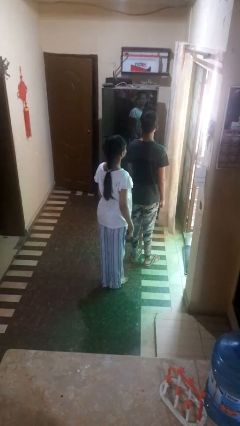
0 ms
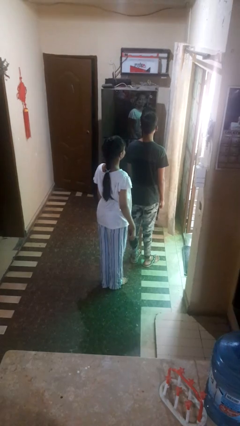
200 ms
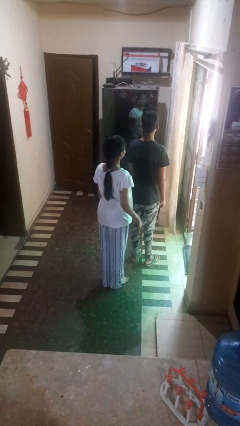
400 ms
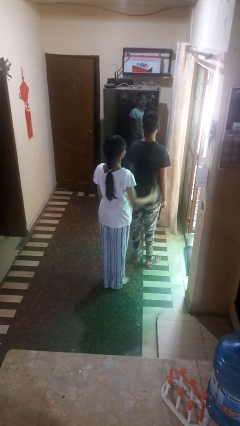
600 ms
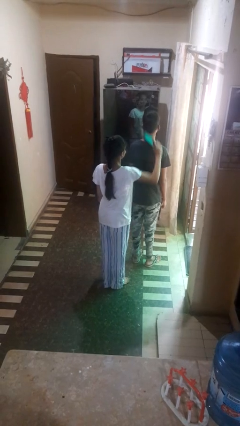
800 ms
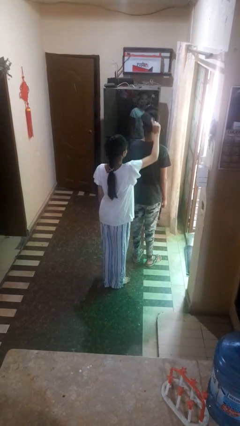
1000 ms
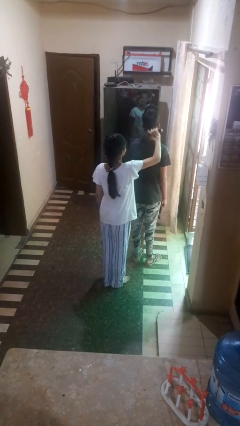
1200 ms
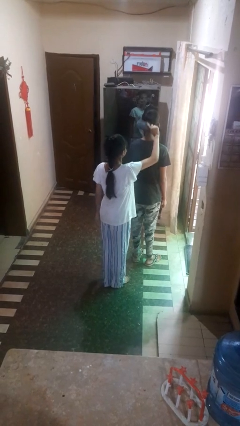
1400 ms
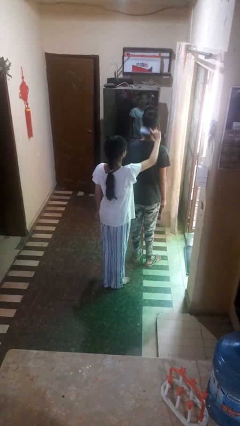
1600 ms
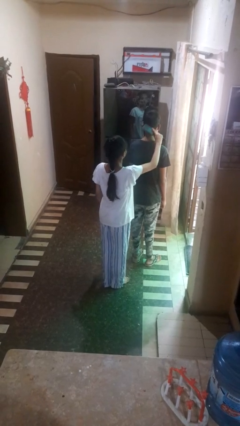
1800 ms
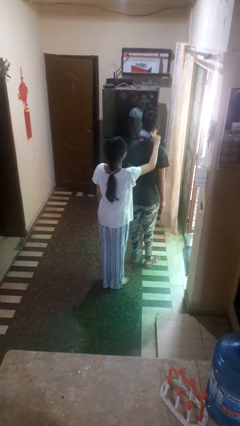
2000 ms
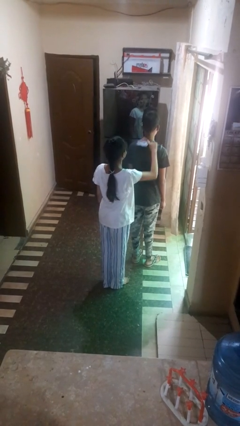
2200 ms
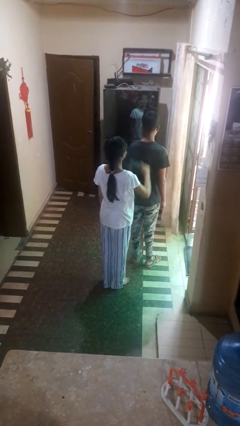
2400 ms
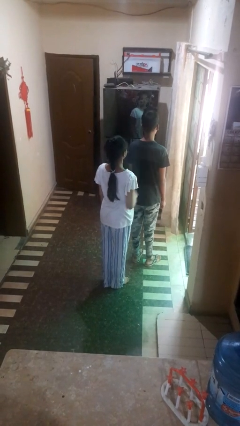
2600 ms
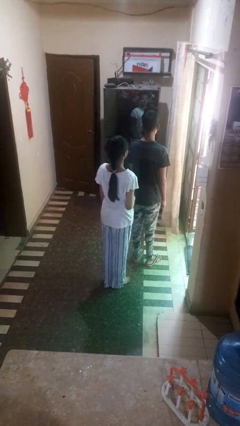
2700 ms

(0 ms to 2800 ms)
person brushes hair of person

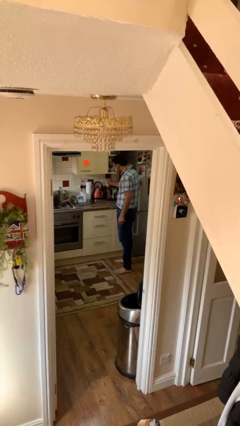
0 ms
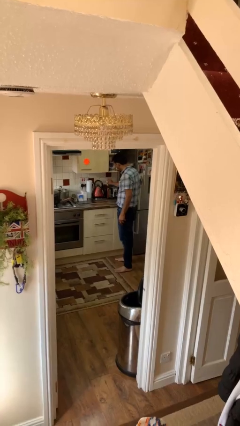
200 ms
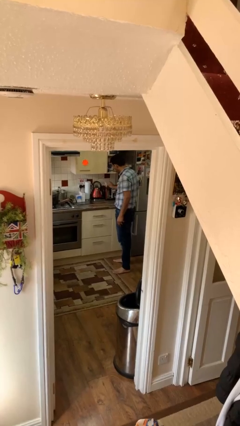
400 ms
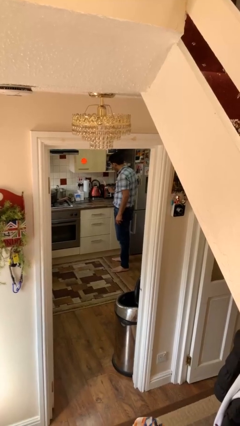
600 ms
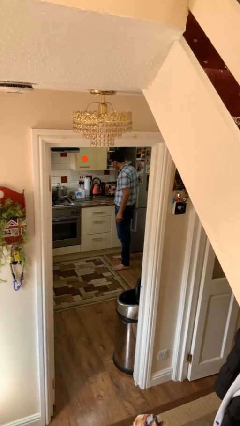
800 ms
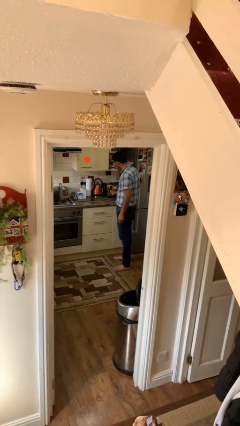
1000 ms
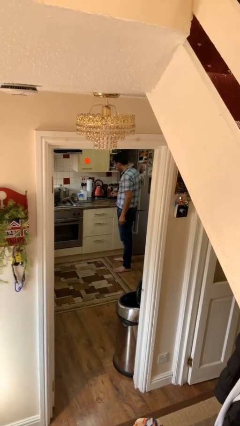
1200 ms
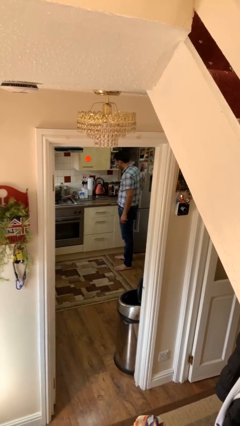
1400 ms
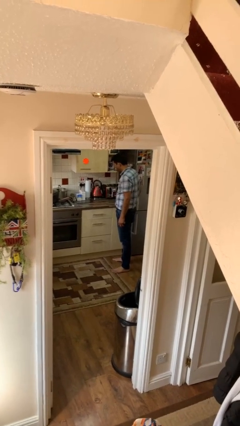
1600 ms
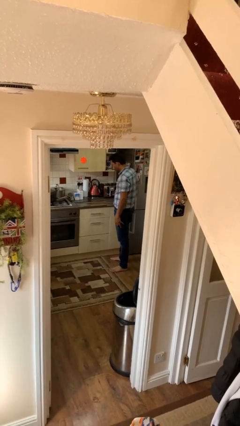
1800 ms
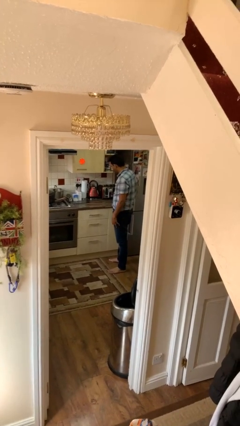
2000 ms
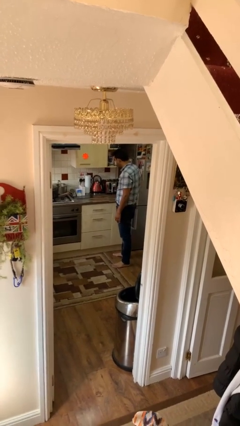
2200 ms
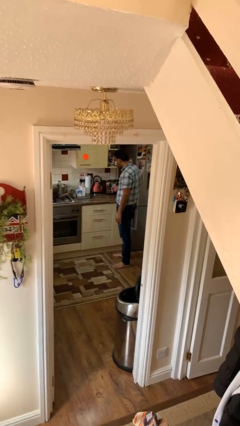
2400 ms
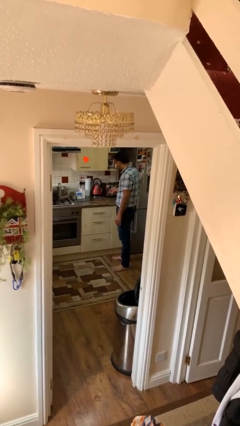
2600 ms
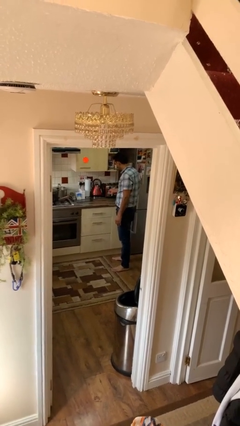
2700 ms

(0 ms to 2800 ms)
person puts object into toaster

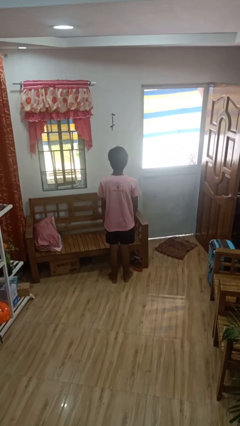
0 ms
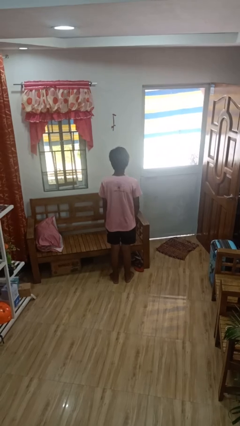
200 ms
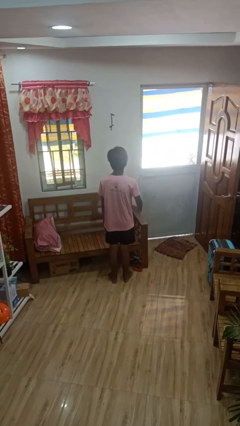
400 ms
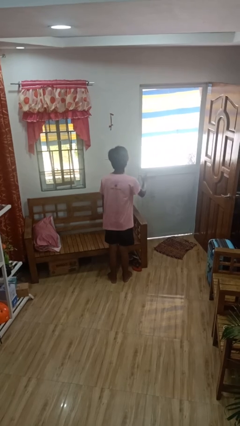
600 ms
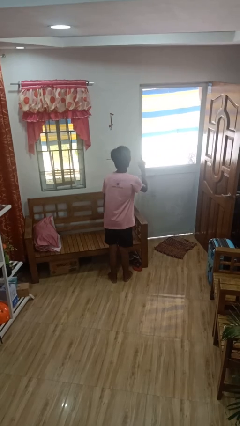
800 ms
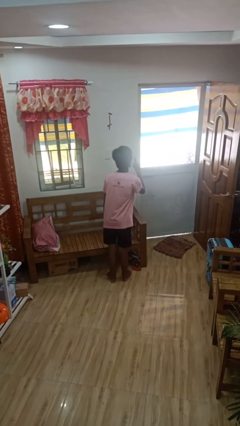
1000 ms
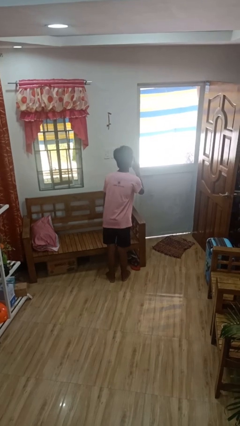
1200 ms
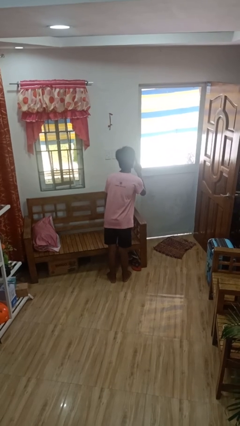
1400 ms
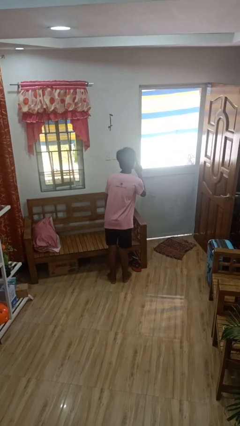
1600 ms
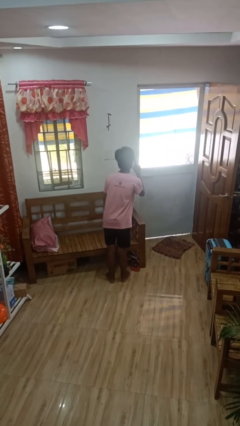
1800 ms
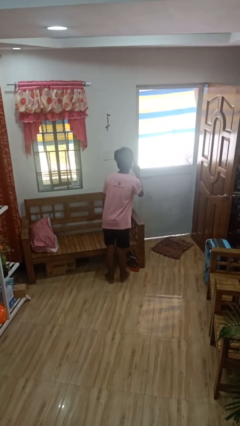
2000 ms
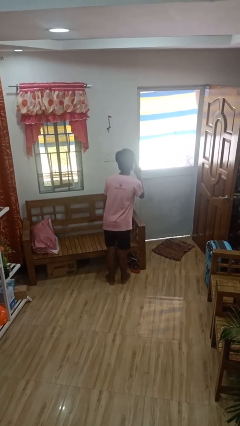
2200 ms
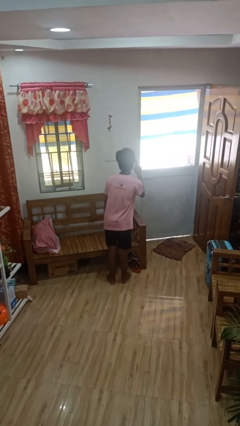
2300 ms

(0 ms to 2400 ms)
person gestures be quiet

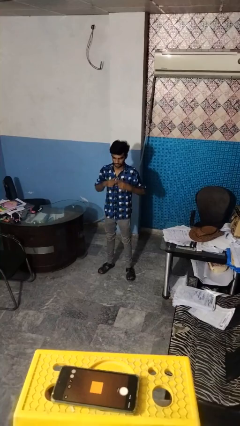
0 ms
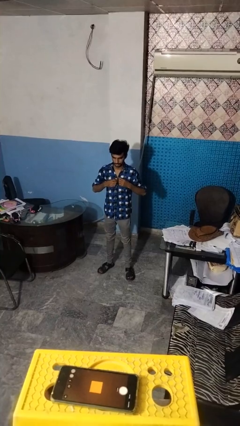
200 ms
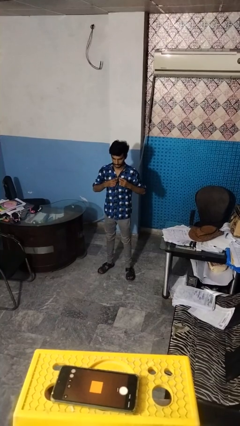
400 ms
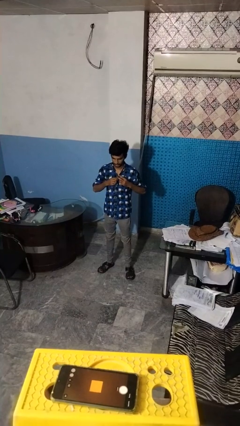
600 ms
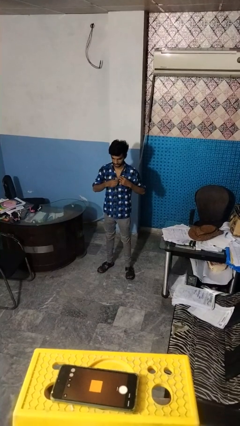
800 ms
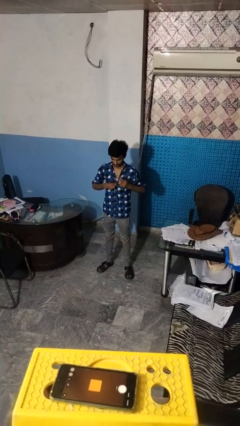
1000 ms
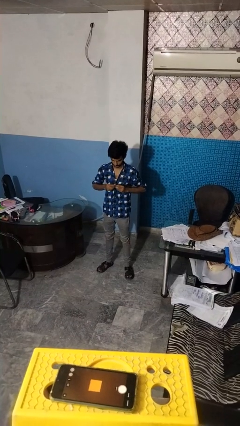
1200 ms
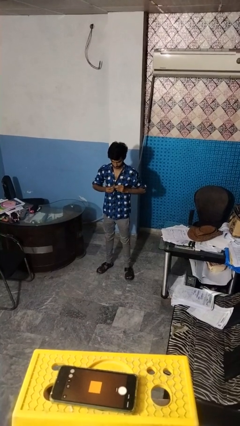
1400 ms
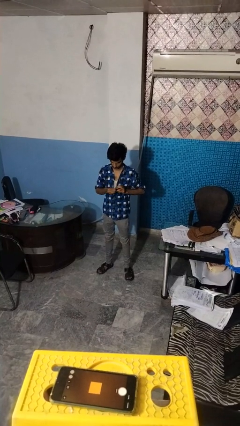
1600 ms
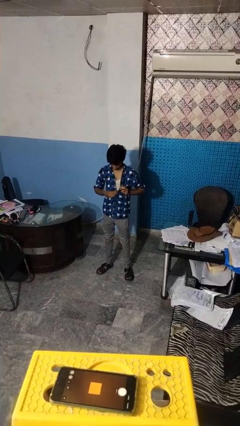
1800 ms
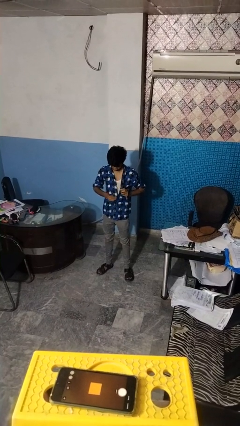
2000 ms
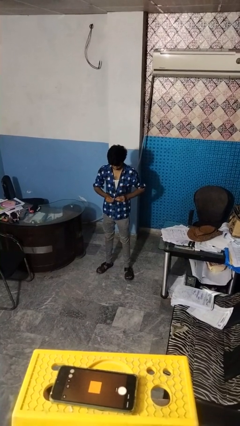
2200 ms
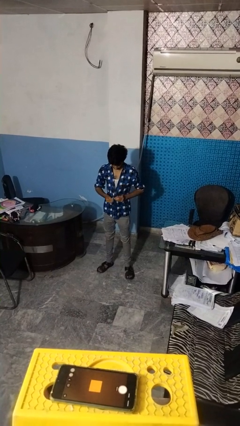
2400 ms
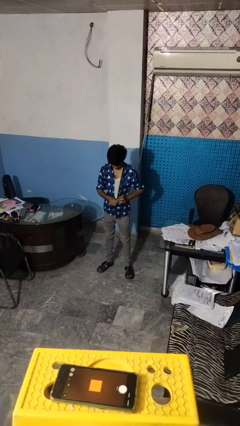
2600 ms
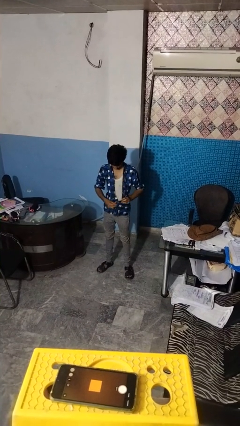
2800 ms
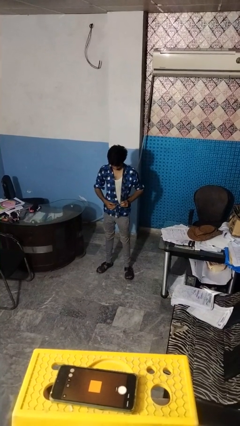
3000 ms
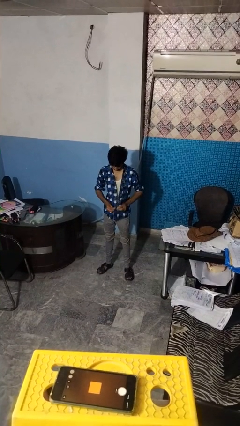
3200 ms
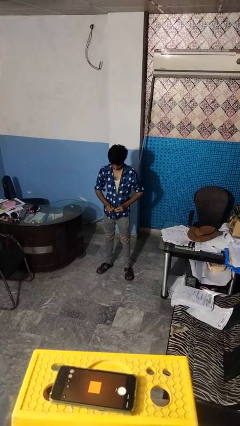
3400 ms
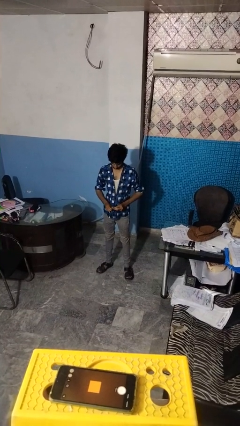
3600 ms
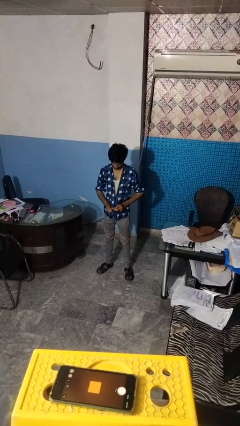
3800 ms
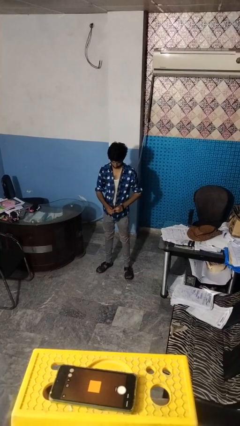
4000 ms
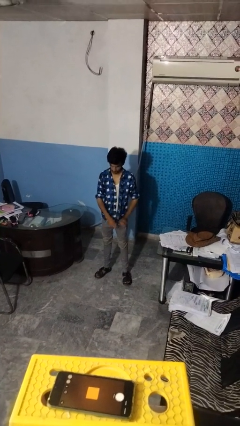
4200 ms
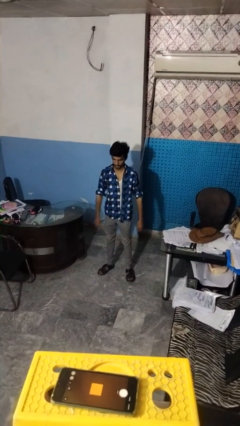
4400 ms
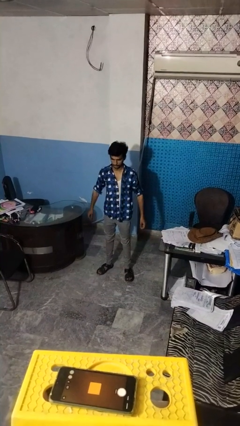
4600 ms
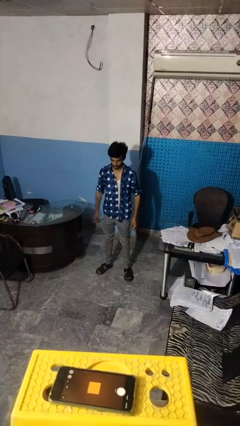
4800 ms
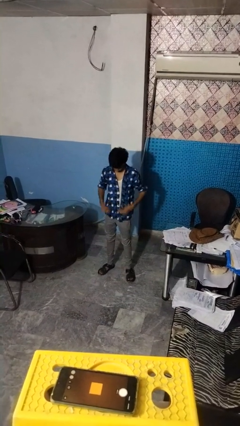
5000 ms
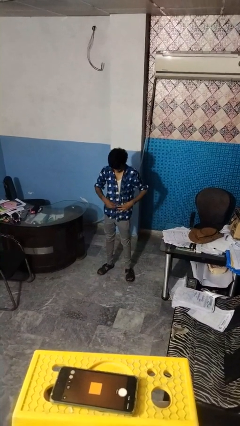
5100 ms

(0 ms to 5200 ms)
person unbuttons shirt

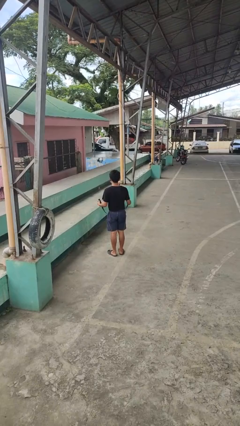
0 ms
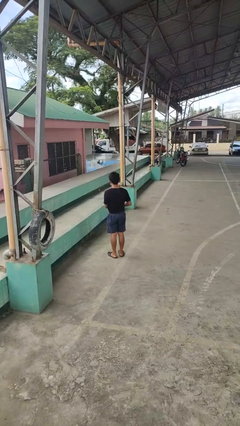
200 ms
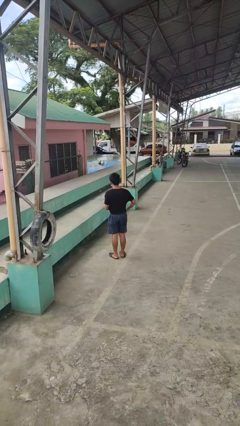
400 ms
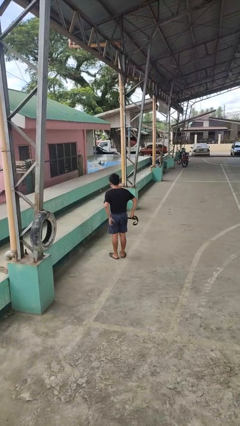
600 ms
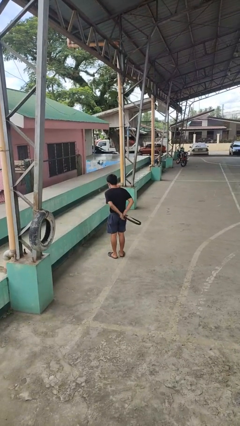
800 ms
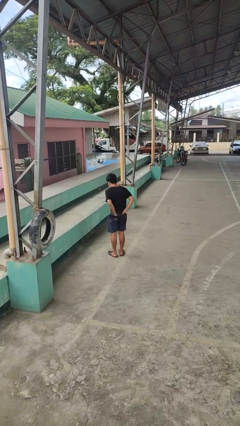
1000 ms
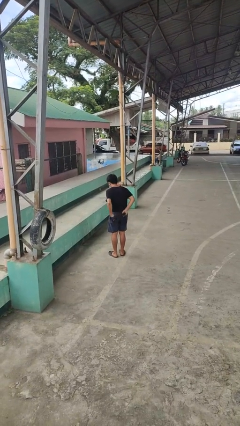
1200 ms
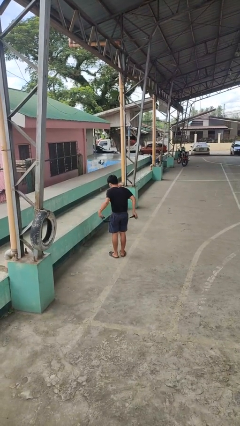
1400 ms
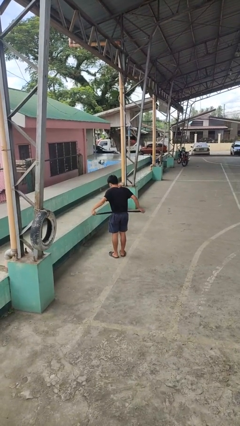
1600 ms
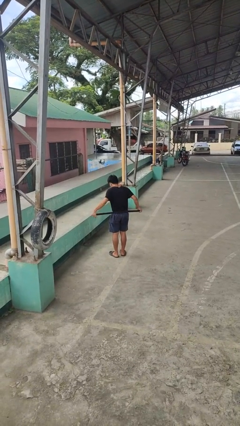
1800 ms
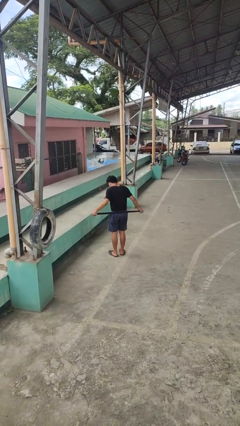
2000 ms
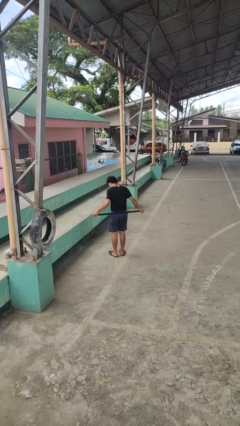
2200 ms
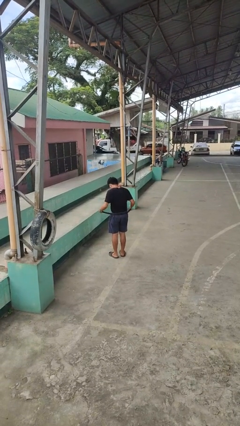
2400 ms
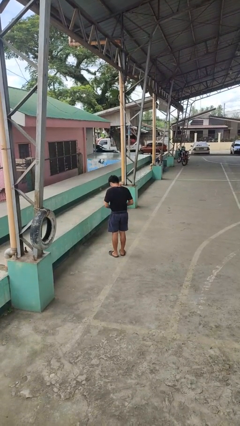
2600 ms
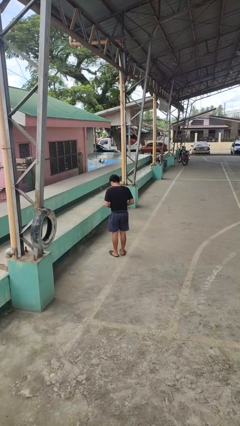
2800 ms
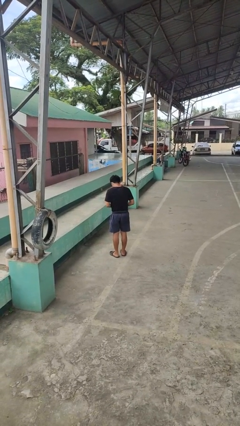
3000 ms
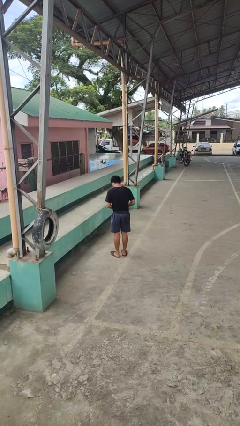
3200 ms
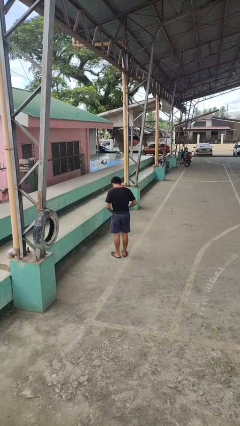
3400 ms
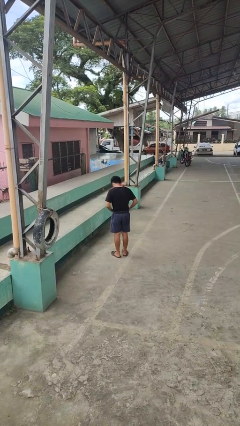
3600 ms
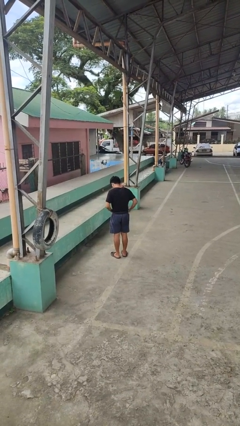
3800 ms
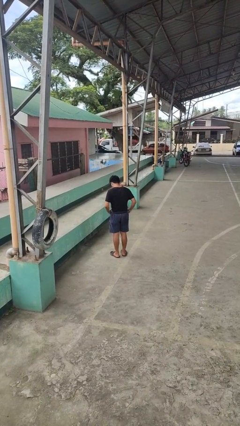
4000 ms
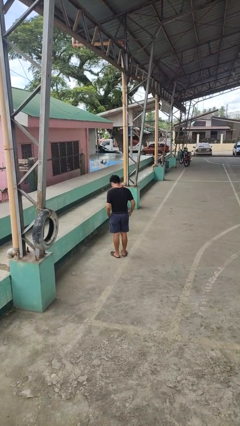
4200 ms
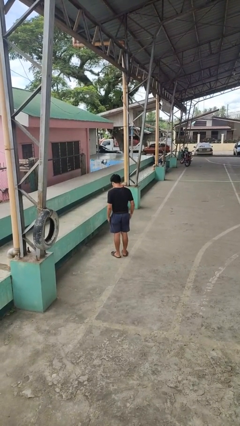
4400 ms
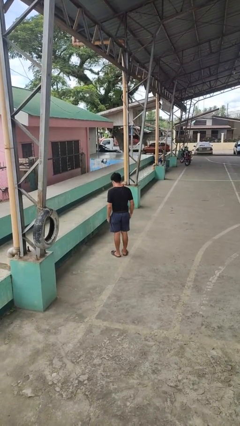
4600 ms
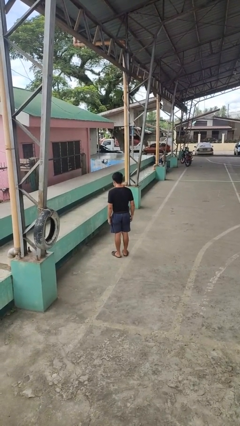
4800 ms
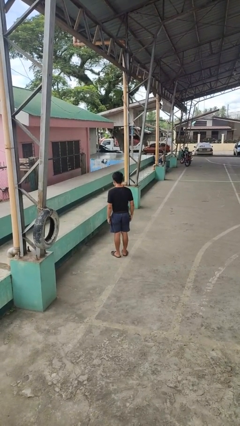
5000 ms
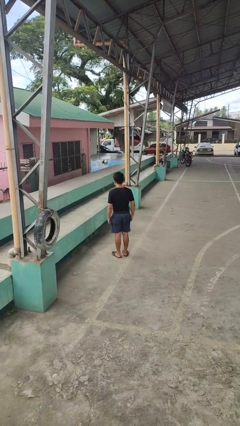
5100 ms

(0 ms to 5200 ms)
person puts on belt
